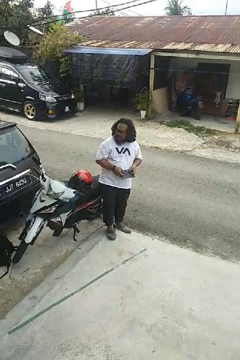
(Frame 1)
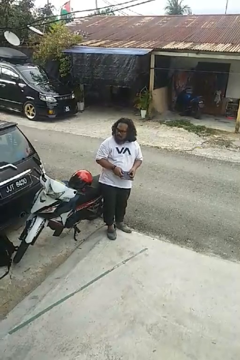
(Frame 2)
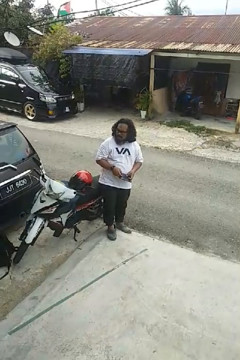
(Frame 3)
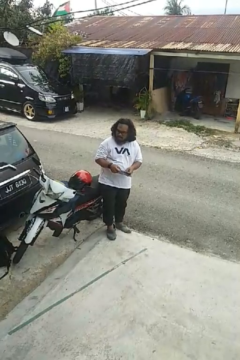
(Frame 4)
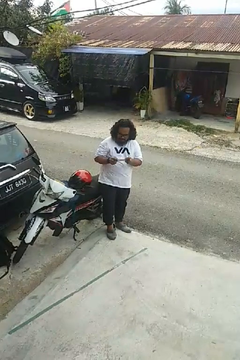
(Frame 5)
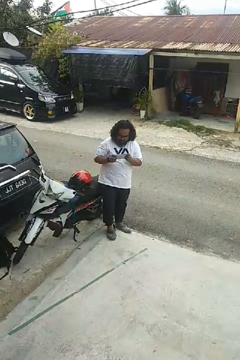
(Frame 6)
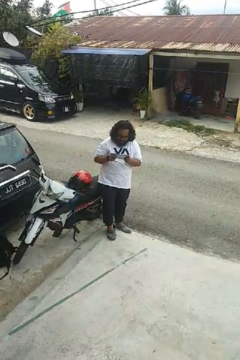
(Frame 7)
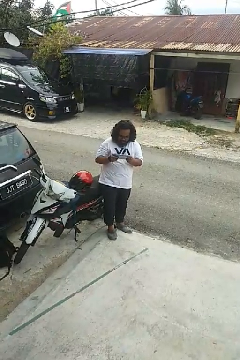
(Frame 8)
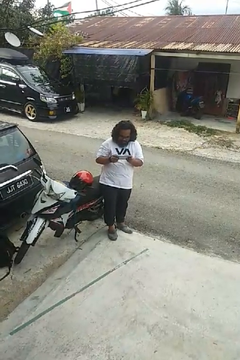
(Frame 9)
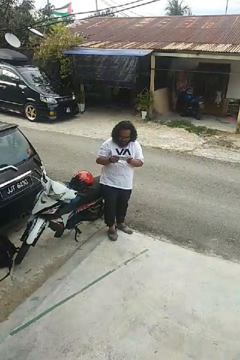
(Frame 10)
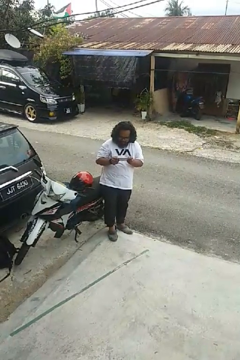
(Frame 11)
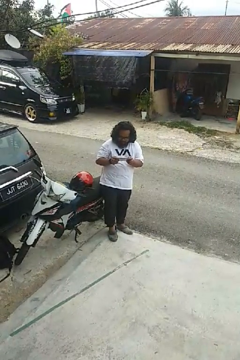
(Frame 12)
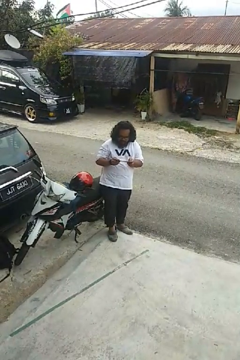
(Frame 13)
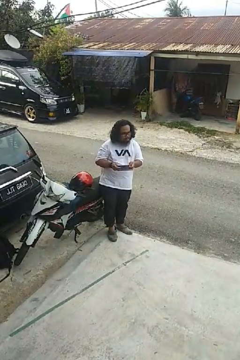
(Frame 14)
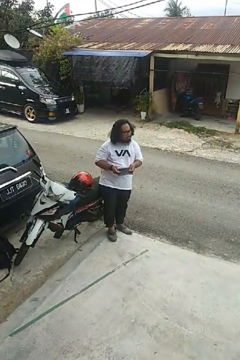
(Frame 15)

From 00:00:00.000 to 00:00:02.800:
person interacts with handheld game

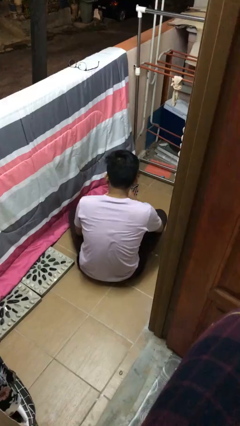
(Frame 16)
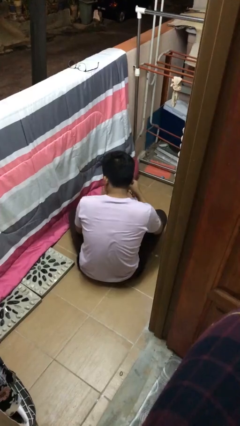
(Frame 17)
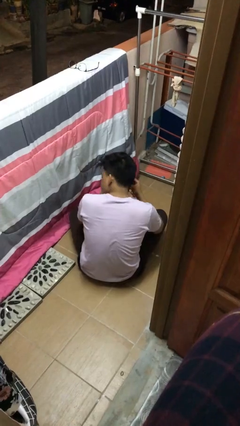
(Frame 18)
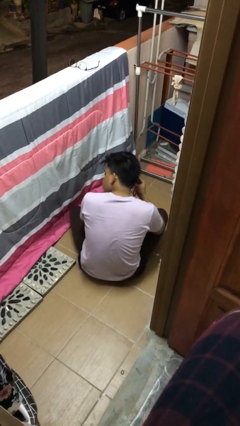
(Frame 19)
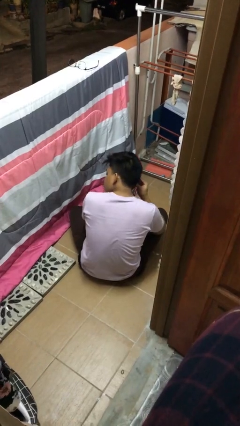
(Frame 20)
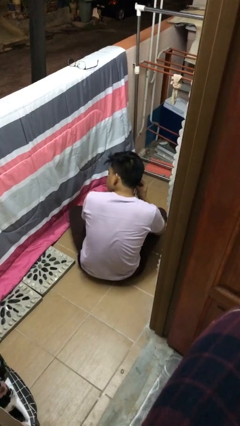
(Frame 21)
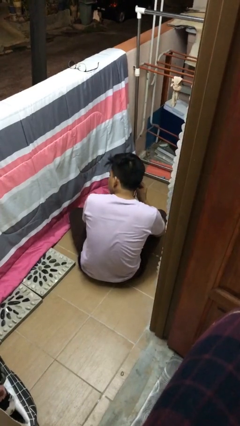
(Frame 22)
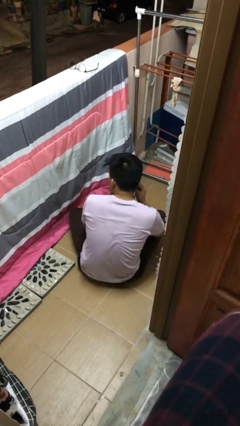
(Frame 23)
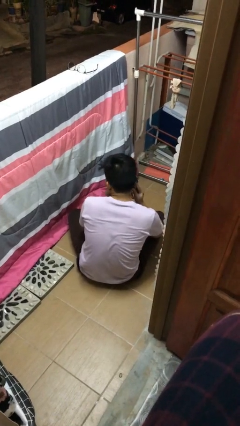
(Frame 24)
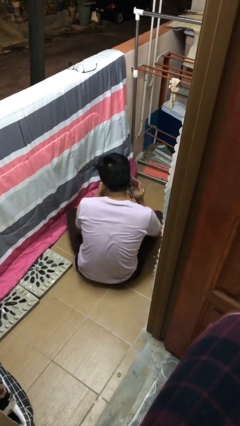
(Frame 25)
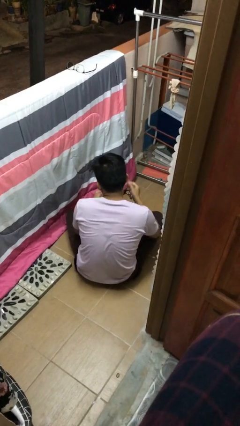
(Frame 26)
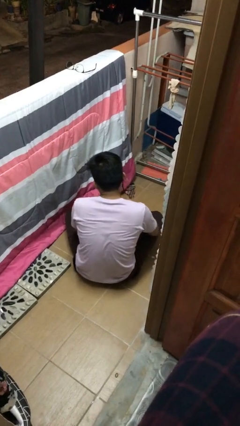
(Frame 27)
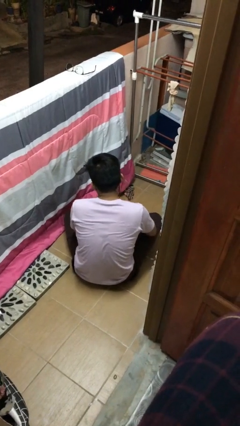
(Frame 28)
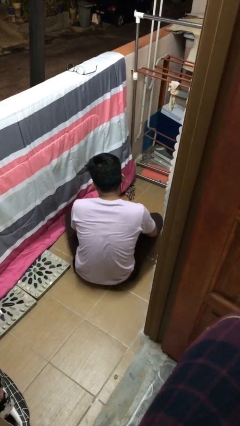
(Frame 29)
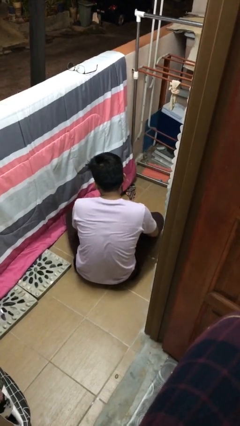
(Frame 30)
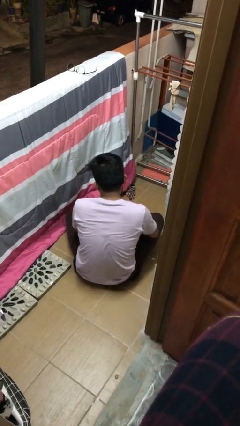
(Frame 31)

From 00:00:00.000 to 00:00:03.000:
person puts on earrings

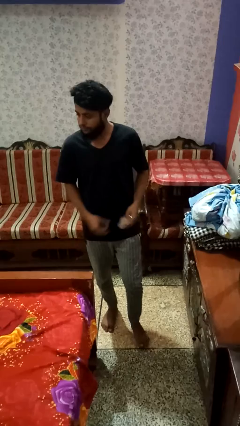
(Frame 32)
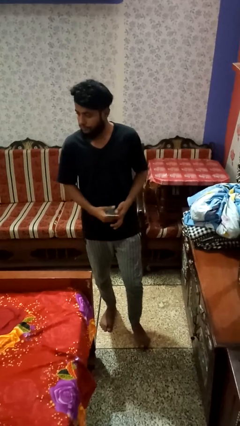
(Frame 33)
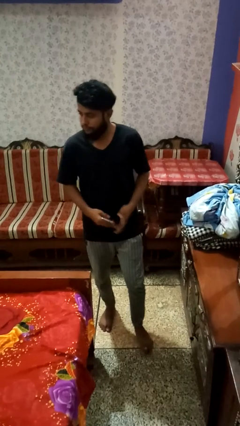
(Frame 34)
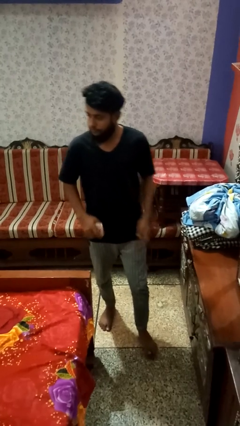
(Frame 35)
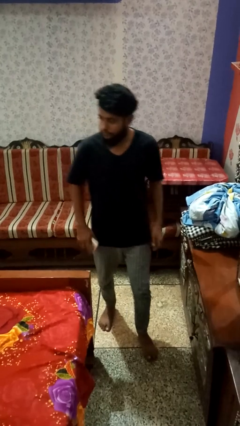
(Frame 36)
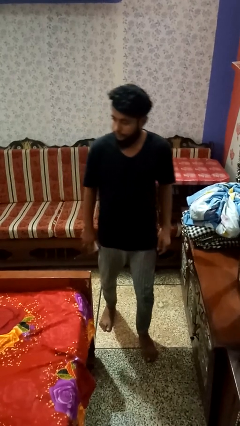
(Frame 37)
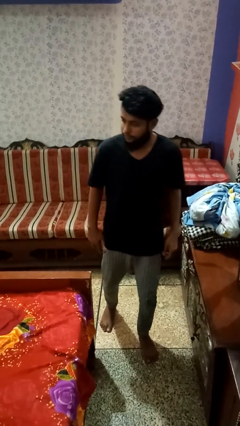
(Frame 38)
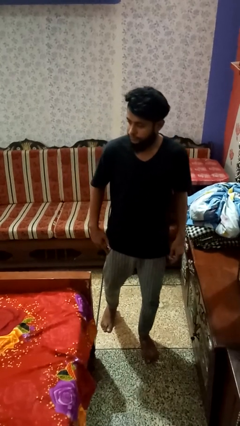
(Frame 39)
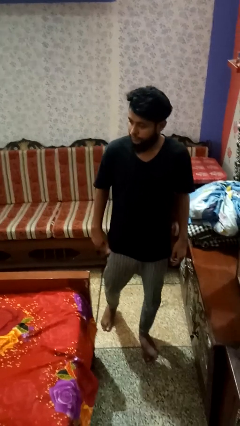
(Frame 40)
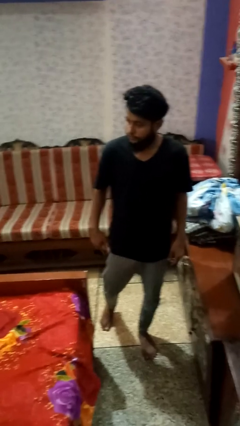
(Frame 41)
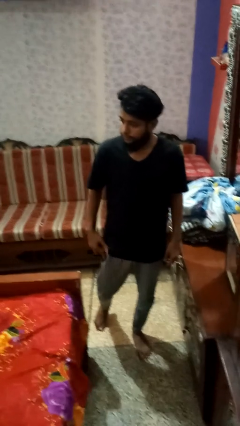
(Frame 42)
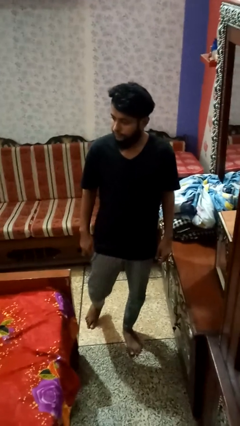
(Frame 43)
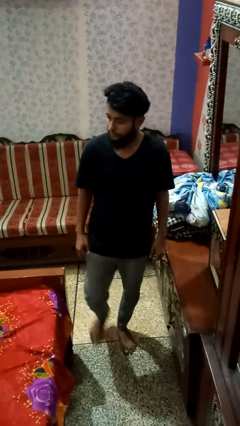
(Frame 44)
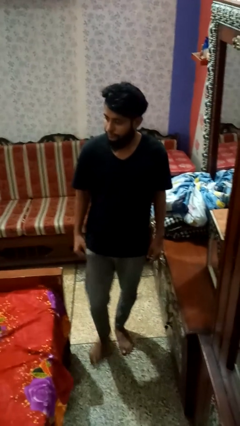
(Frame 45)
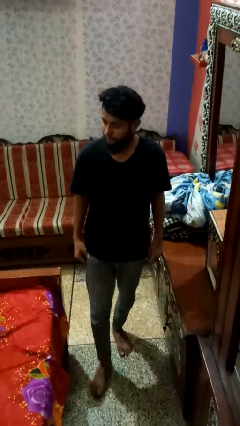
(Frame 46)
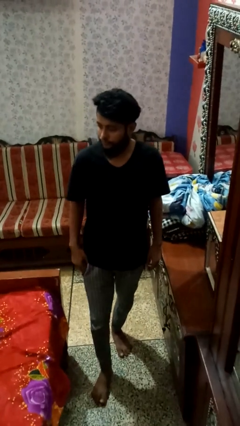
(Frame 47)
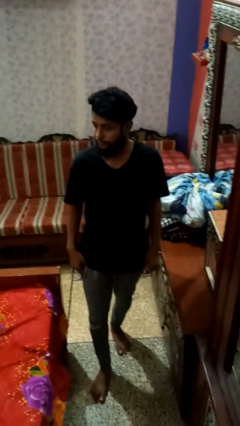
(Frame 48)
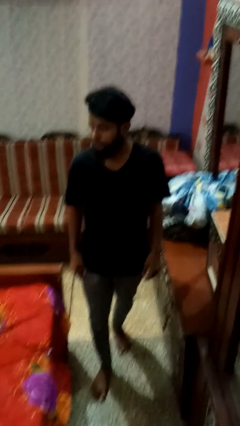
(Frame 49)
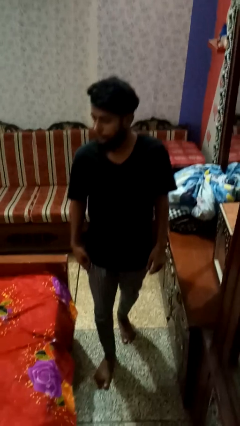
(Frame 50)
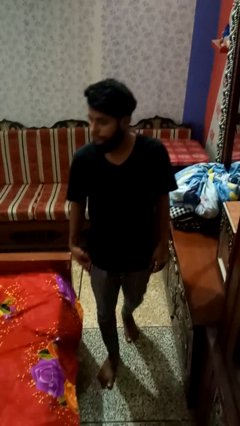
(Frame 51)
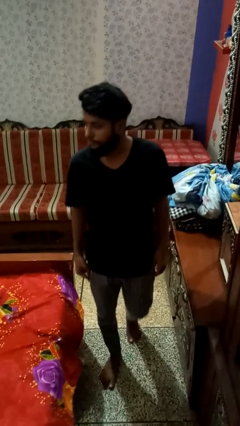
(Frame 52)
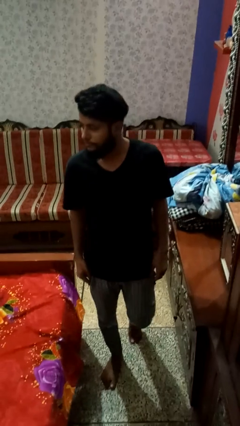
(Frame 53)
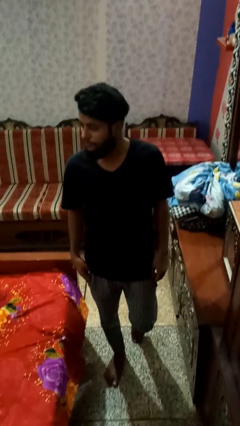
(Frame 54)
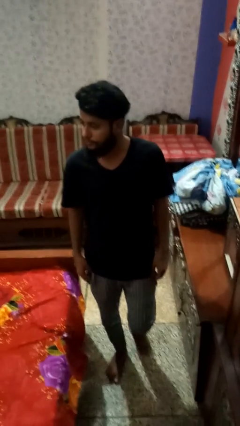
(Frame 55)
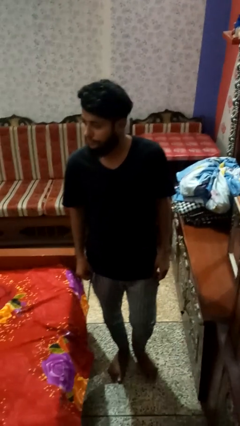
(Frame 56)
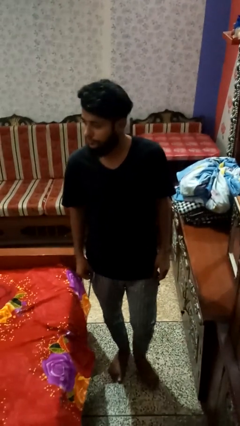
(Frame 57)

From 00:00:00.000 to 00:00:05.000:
person puts phone into pocket

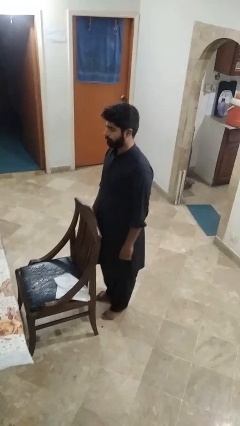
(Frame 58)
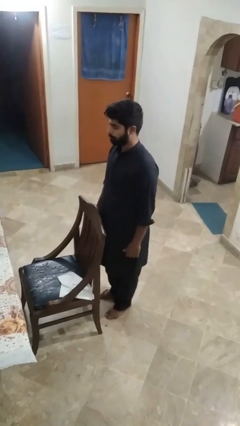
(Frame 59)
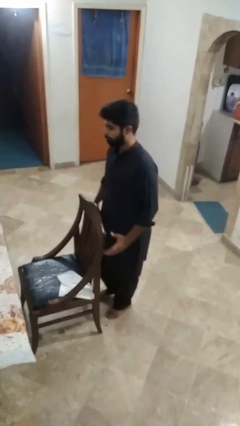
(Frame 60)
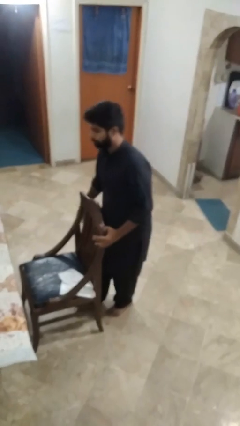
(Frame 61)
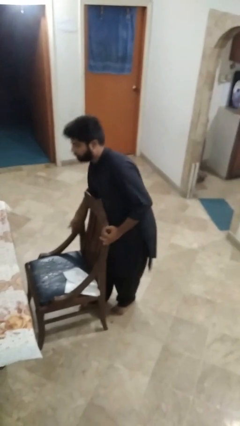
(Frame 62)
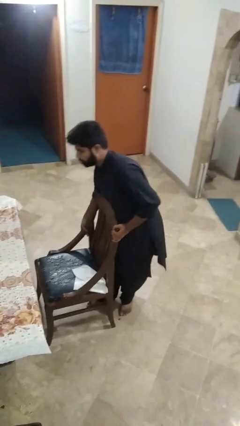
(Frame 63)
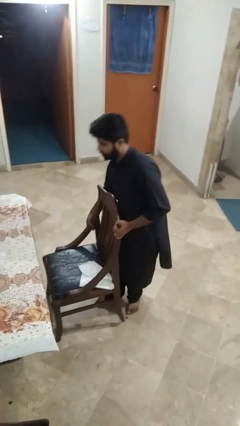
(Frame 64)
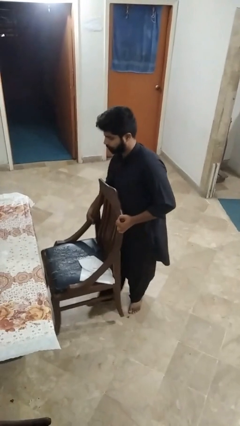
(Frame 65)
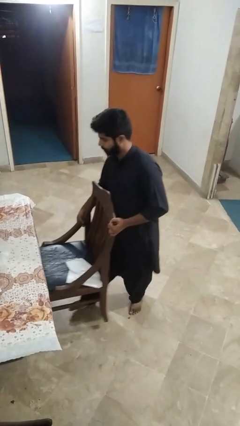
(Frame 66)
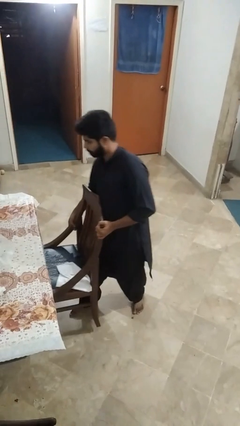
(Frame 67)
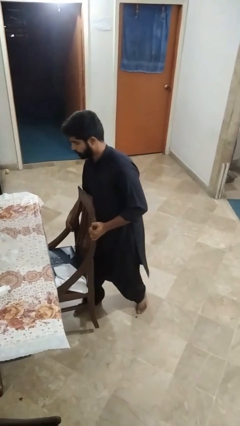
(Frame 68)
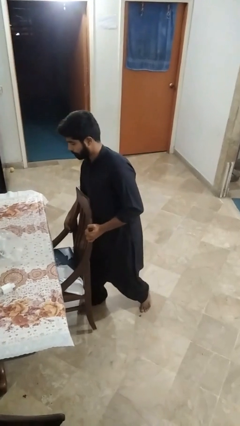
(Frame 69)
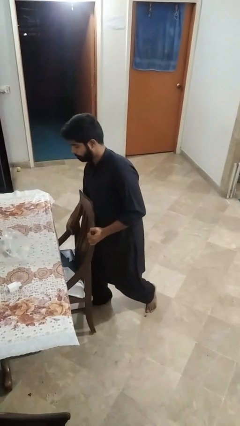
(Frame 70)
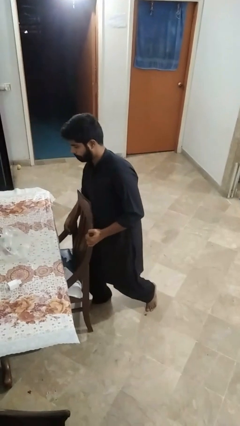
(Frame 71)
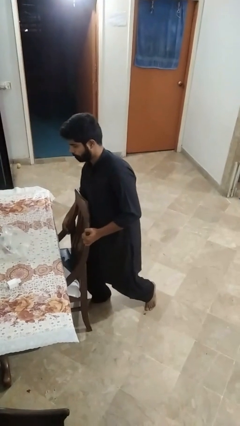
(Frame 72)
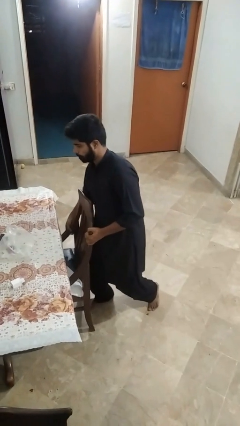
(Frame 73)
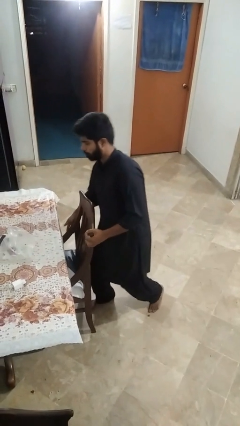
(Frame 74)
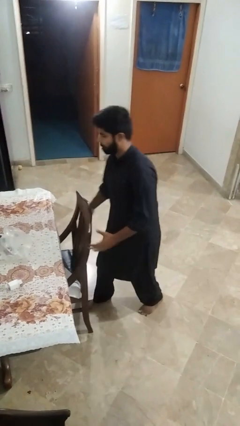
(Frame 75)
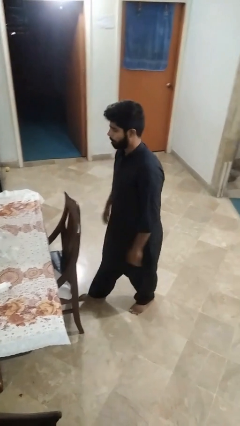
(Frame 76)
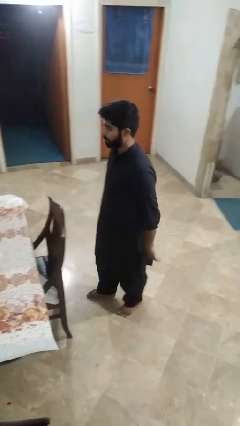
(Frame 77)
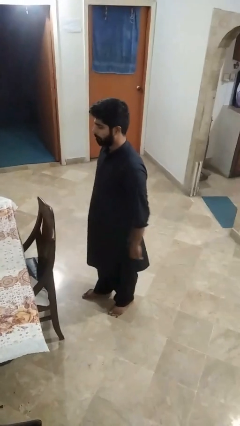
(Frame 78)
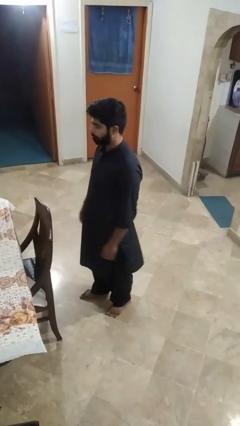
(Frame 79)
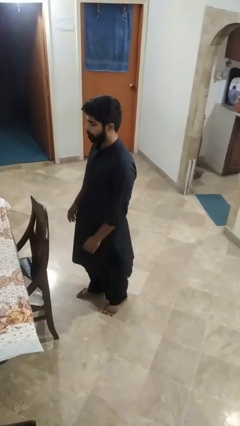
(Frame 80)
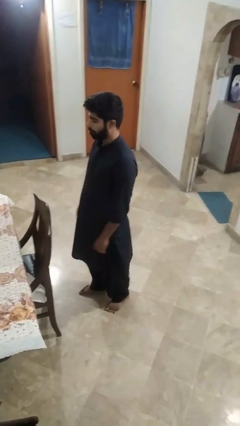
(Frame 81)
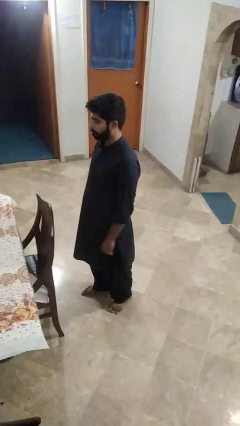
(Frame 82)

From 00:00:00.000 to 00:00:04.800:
person pushes in chair

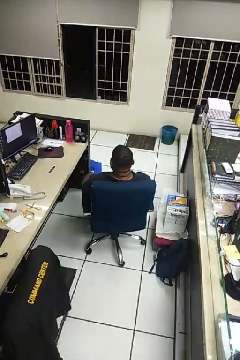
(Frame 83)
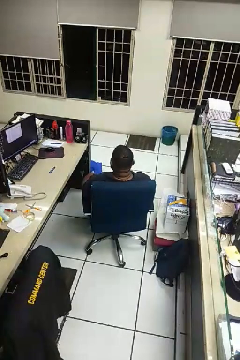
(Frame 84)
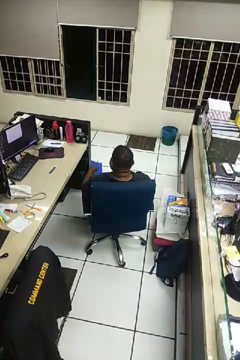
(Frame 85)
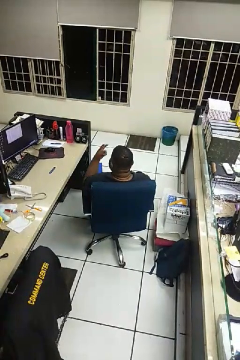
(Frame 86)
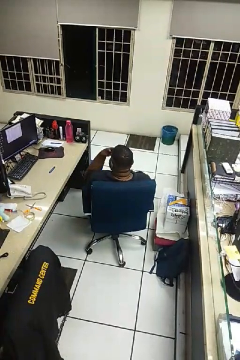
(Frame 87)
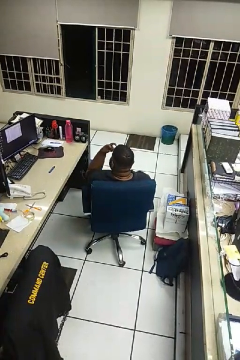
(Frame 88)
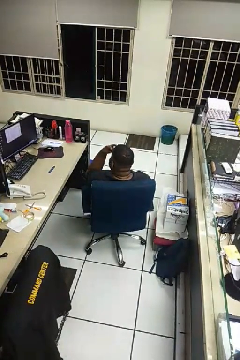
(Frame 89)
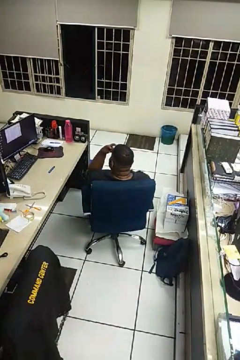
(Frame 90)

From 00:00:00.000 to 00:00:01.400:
person gestures watch closely

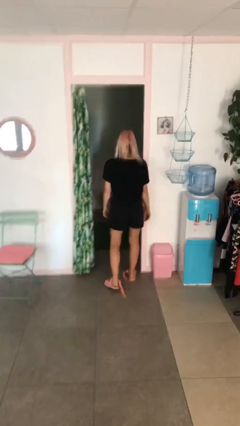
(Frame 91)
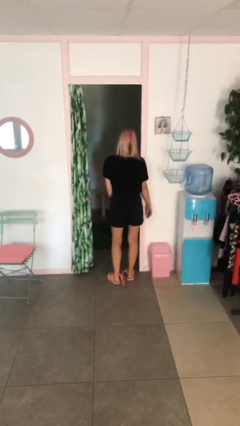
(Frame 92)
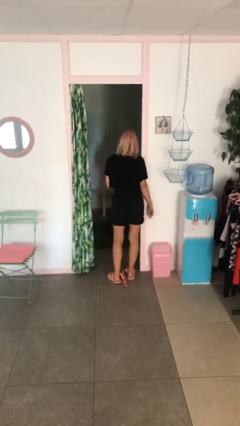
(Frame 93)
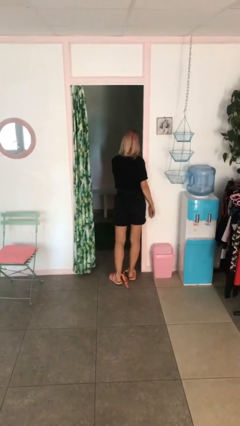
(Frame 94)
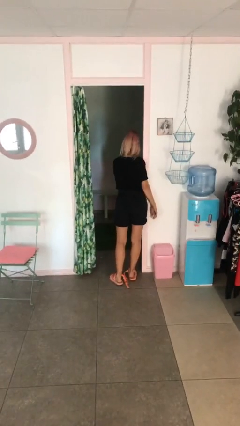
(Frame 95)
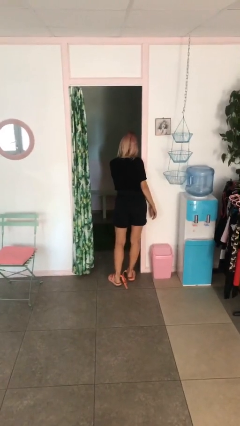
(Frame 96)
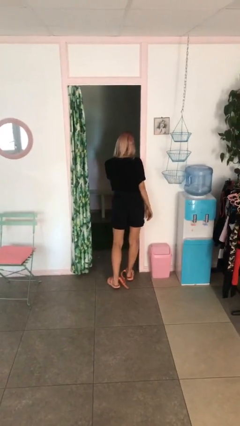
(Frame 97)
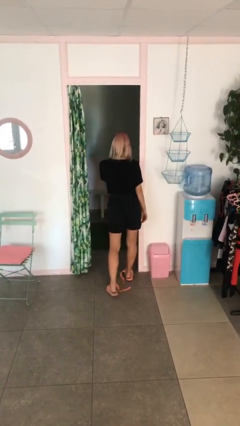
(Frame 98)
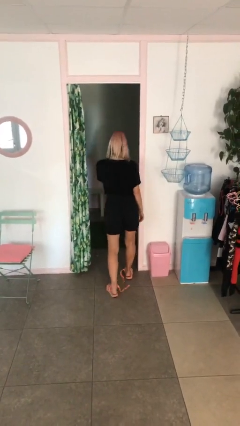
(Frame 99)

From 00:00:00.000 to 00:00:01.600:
person bumps into wall
